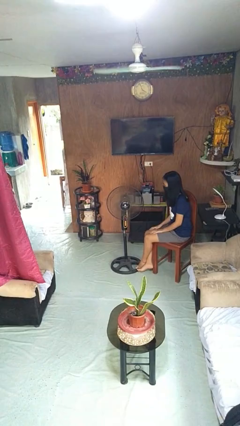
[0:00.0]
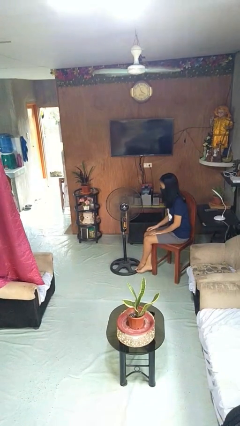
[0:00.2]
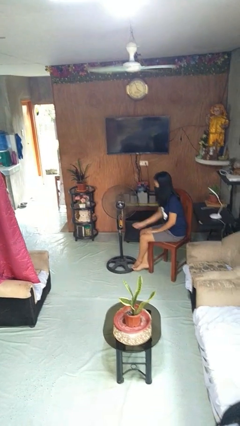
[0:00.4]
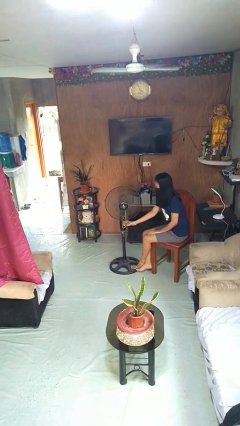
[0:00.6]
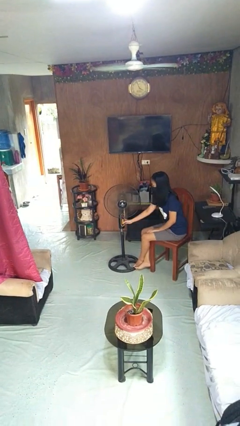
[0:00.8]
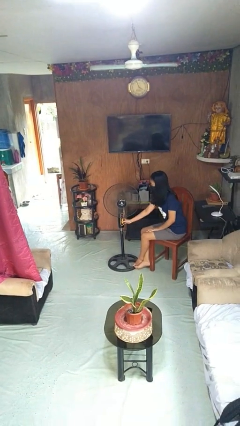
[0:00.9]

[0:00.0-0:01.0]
person turns on fan

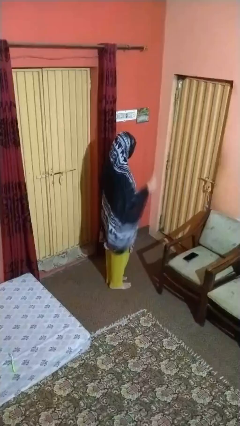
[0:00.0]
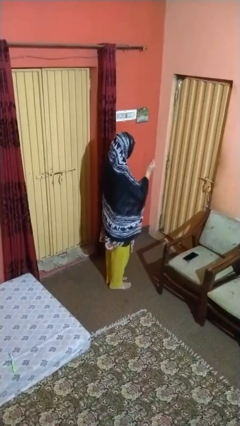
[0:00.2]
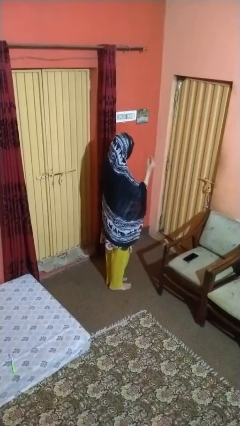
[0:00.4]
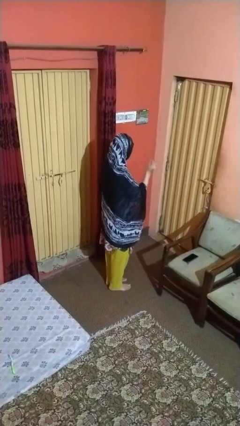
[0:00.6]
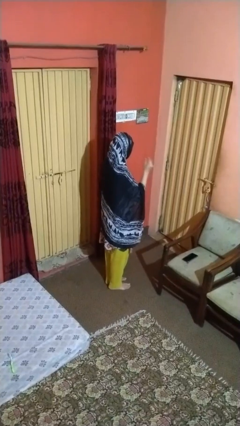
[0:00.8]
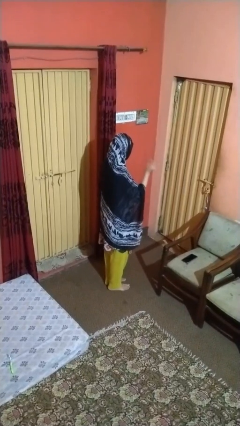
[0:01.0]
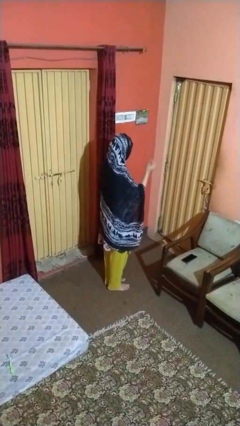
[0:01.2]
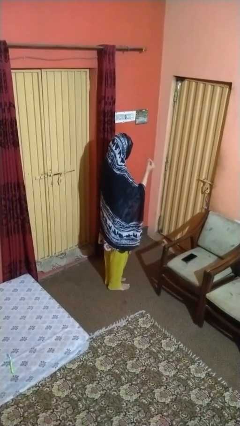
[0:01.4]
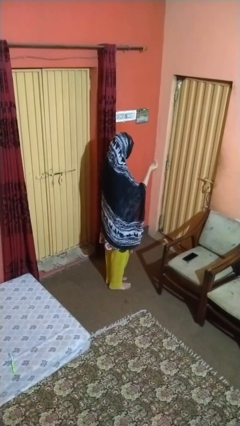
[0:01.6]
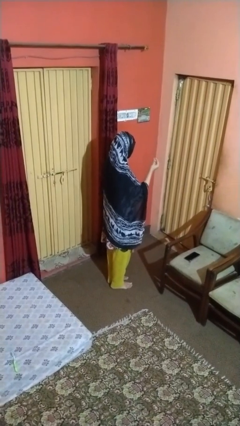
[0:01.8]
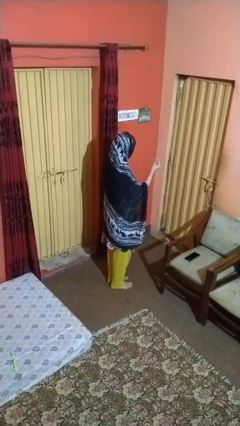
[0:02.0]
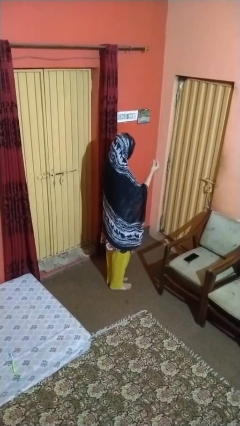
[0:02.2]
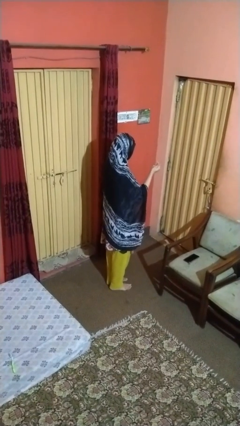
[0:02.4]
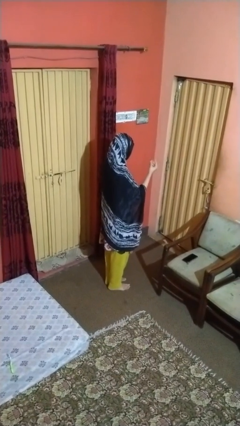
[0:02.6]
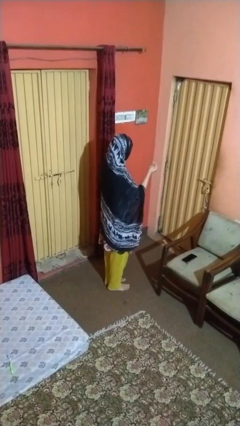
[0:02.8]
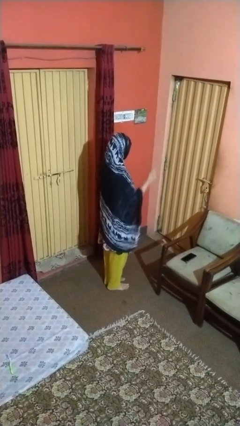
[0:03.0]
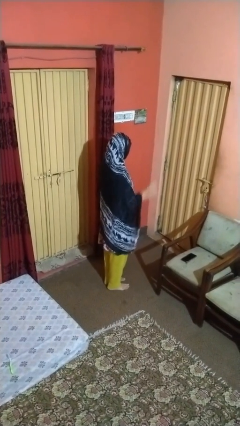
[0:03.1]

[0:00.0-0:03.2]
person snaps fingers

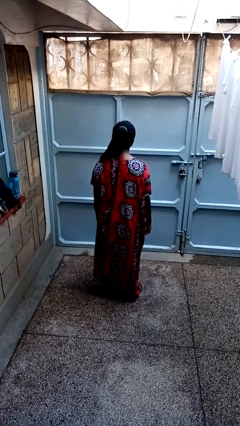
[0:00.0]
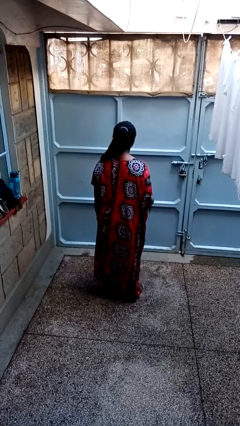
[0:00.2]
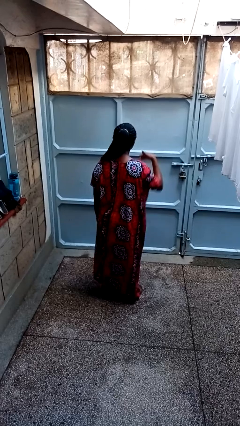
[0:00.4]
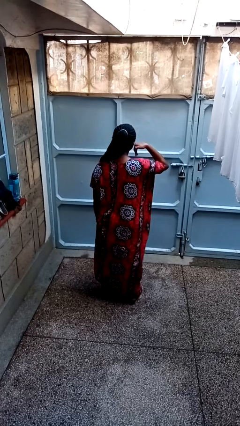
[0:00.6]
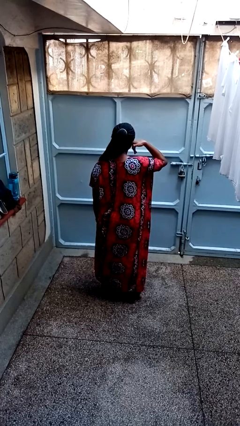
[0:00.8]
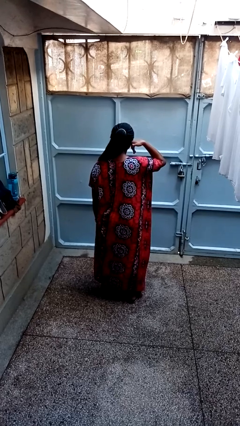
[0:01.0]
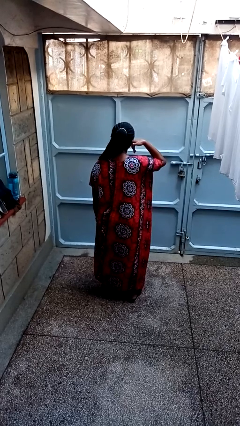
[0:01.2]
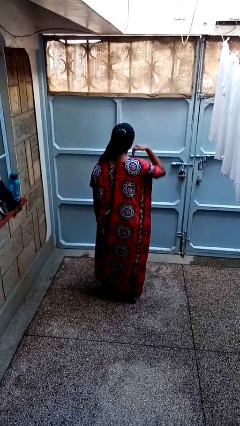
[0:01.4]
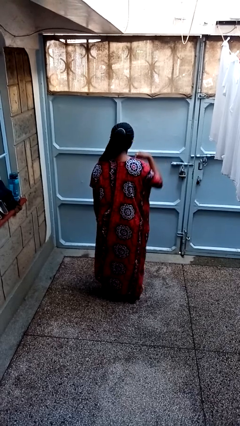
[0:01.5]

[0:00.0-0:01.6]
person gestures call me

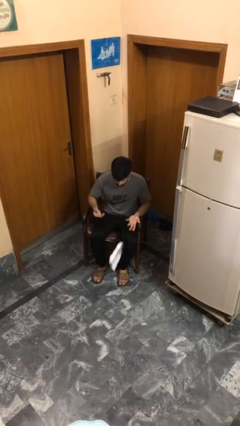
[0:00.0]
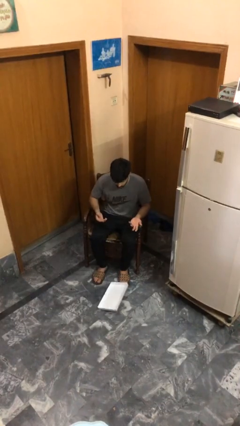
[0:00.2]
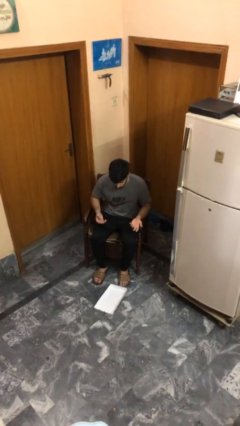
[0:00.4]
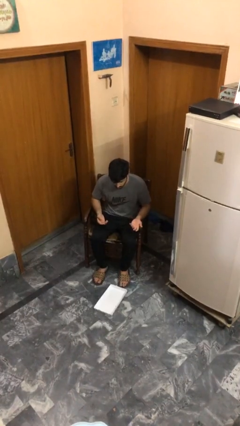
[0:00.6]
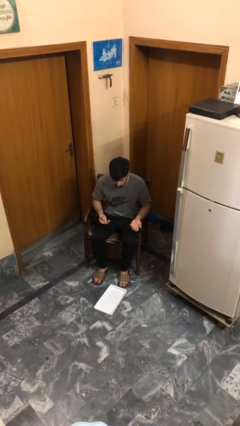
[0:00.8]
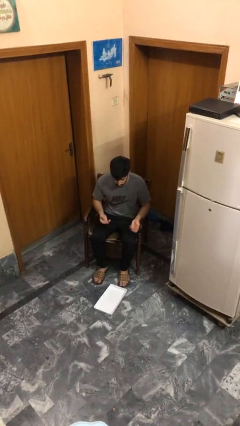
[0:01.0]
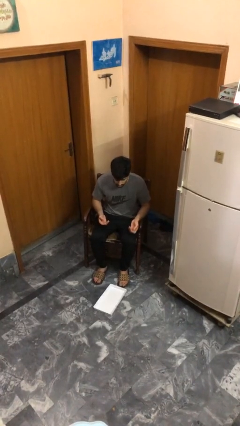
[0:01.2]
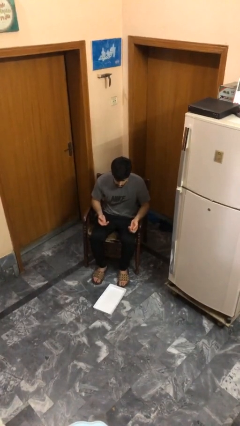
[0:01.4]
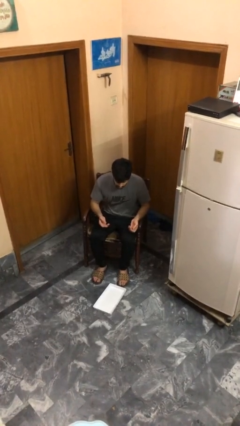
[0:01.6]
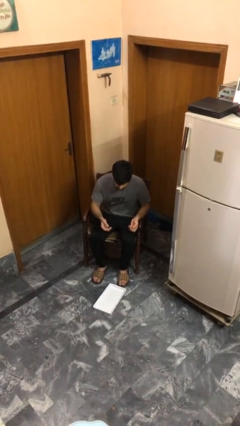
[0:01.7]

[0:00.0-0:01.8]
person drops object

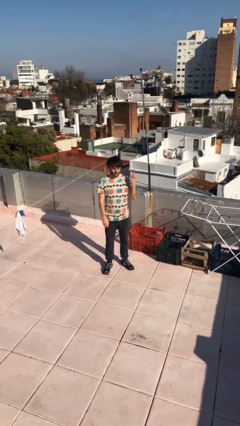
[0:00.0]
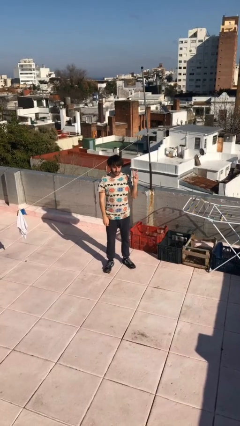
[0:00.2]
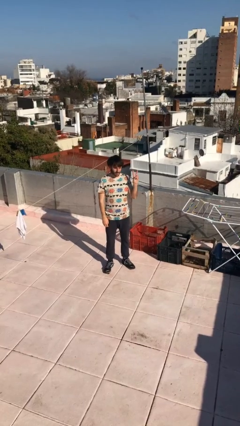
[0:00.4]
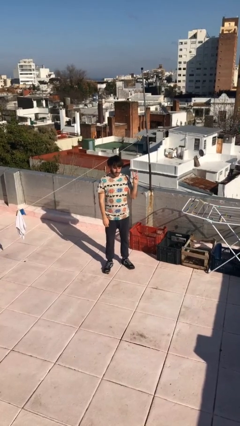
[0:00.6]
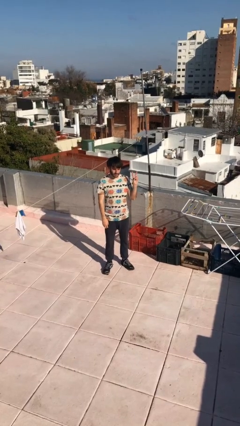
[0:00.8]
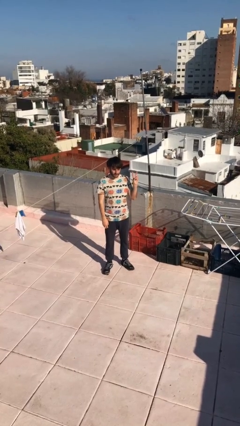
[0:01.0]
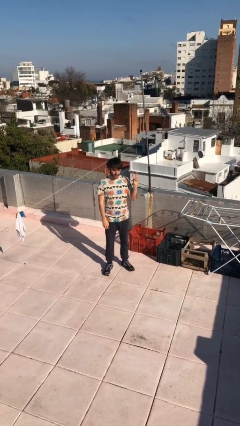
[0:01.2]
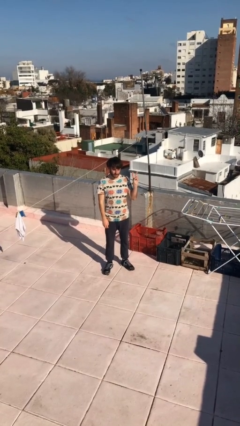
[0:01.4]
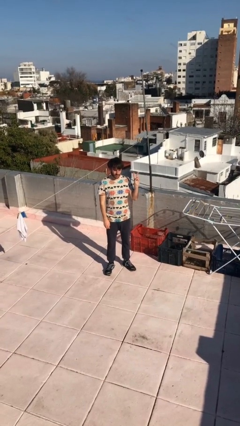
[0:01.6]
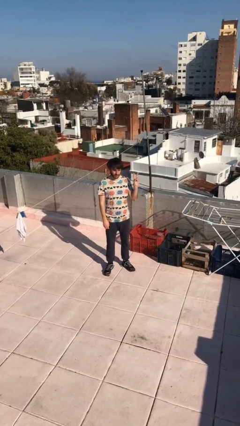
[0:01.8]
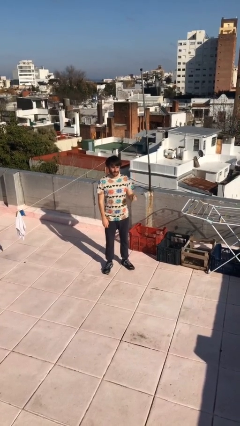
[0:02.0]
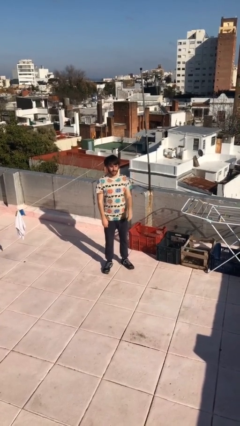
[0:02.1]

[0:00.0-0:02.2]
person gestures peace

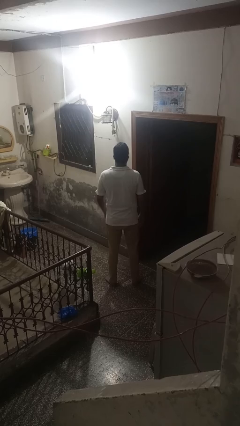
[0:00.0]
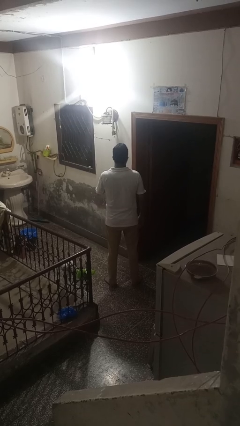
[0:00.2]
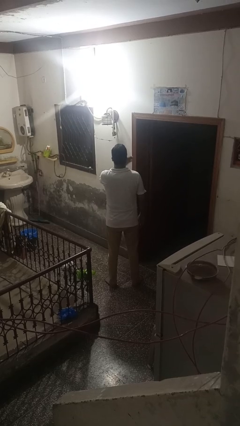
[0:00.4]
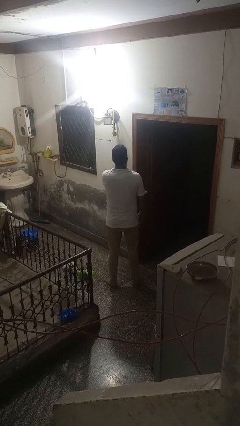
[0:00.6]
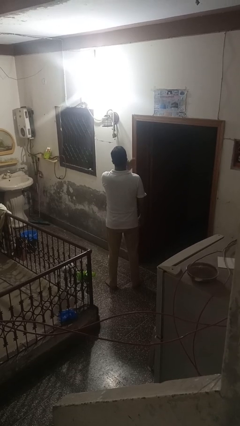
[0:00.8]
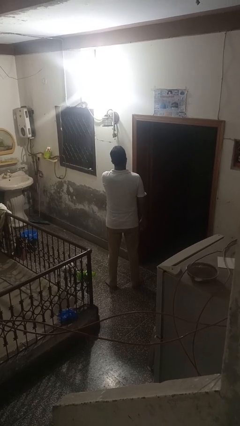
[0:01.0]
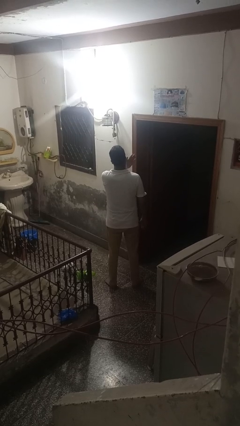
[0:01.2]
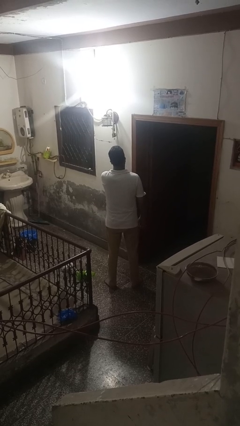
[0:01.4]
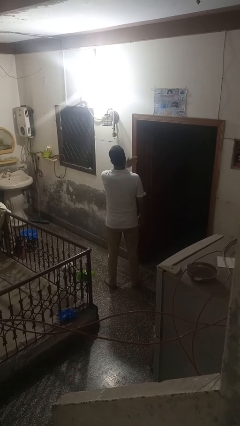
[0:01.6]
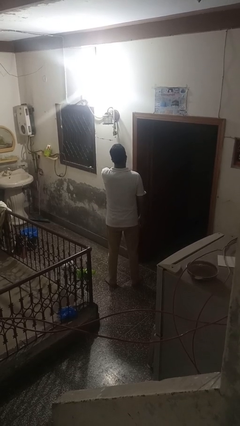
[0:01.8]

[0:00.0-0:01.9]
person drums on chest

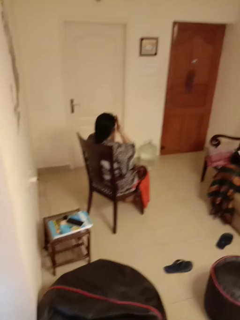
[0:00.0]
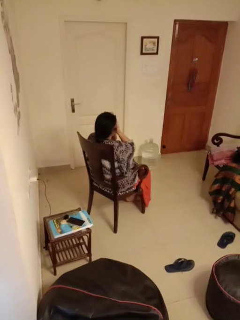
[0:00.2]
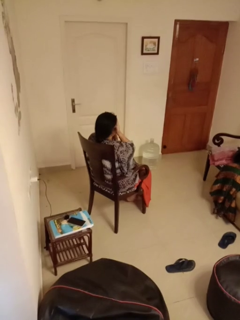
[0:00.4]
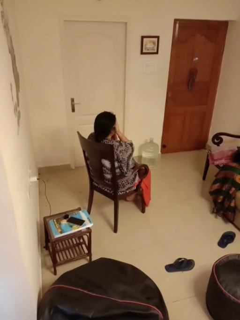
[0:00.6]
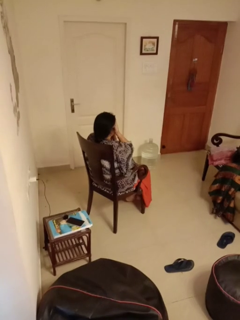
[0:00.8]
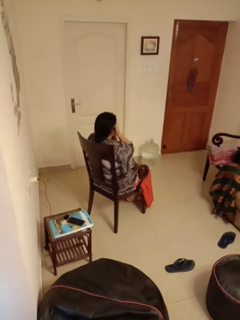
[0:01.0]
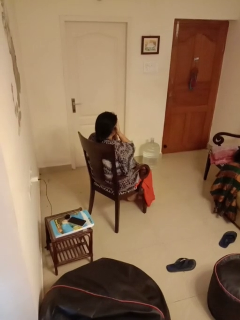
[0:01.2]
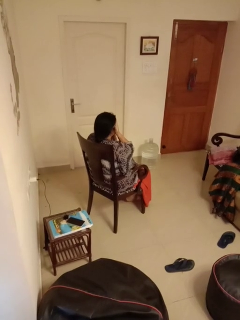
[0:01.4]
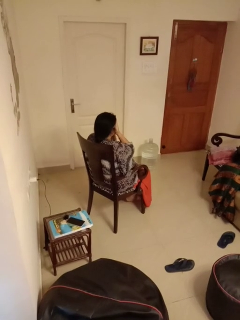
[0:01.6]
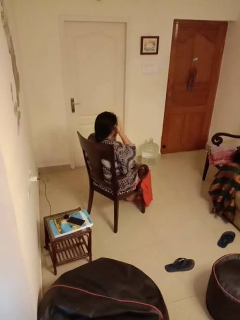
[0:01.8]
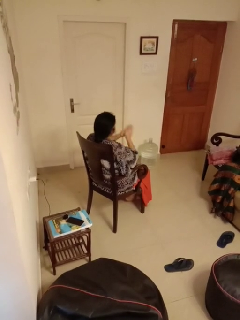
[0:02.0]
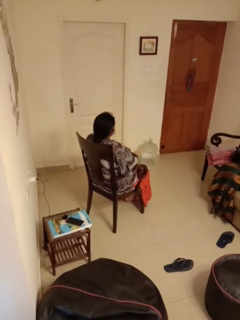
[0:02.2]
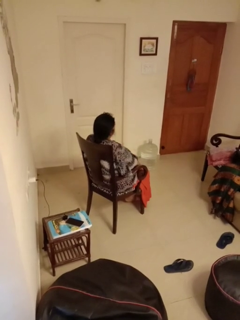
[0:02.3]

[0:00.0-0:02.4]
person covers face with hands

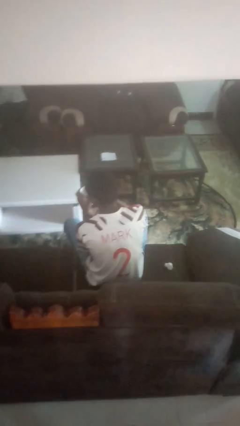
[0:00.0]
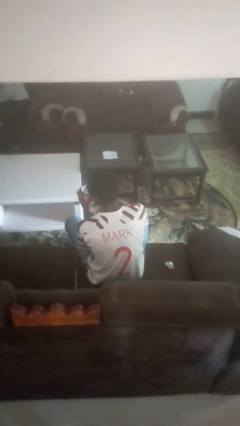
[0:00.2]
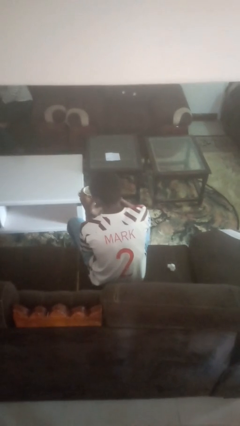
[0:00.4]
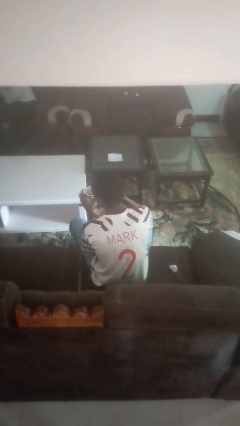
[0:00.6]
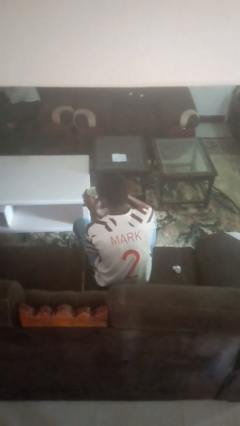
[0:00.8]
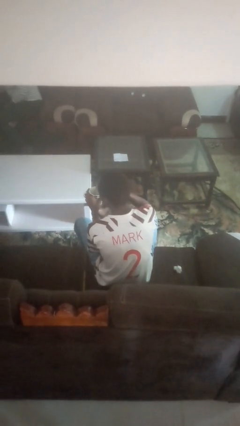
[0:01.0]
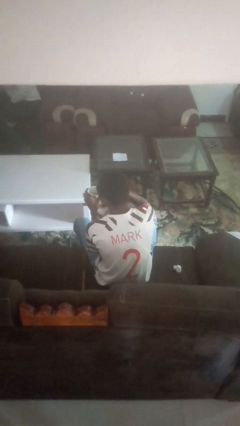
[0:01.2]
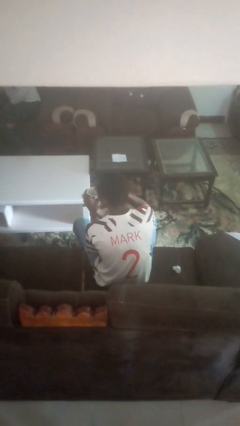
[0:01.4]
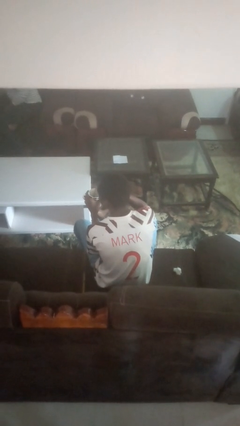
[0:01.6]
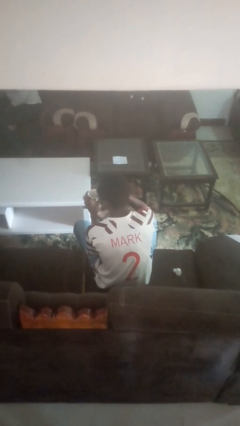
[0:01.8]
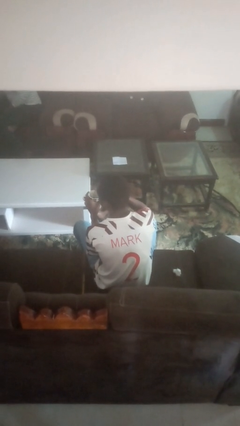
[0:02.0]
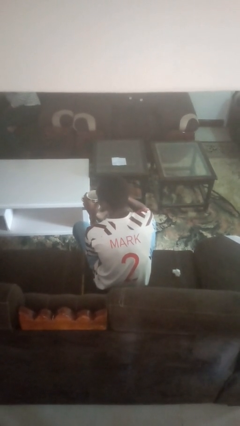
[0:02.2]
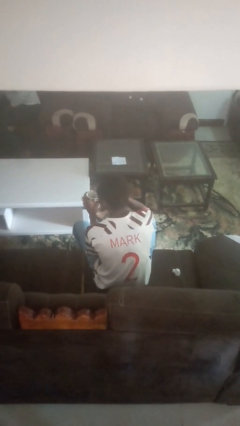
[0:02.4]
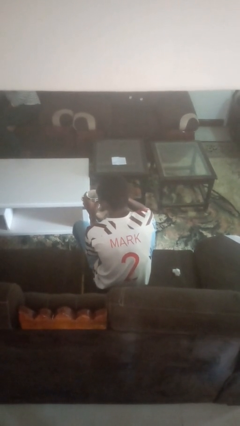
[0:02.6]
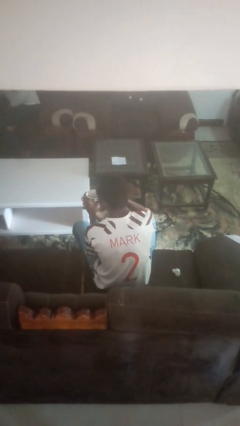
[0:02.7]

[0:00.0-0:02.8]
person stirs mug

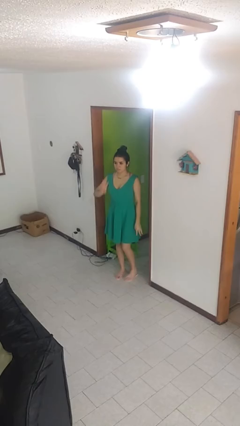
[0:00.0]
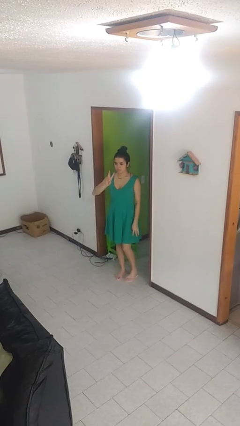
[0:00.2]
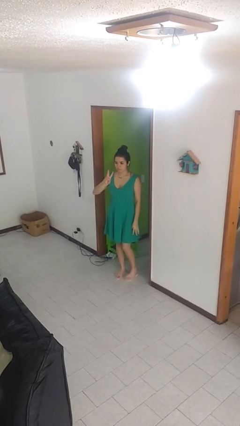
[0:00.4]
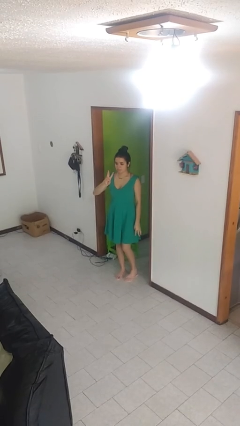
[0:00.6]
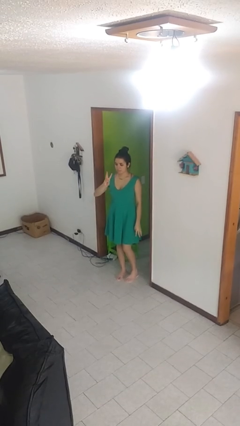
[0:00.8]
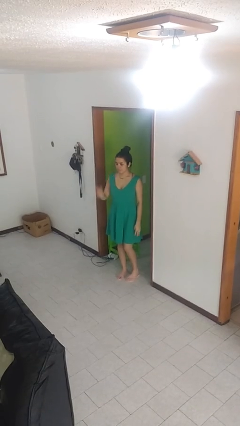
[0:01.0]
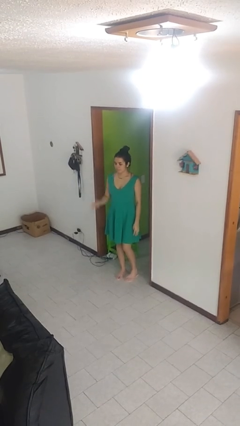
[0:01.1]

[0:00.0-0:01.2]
person gestures number three
